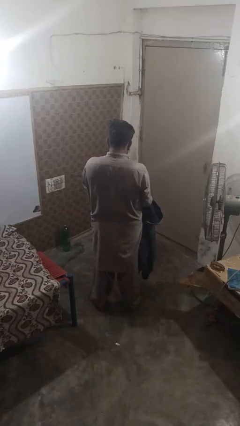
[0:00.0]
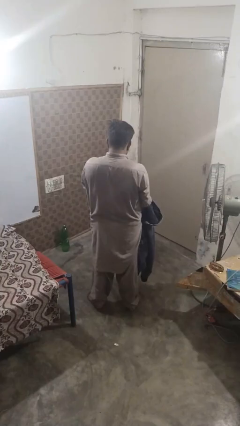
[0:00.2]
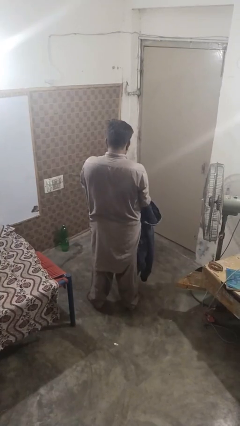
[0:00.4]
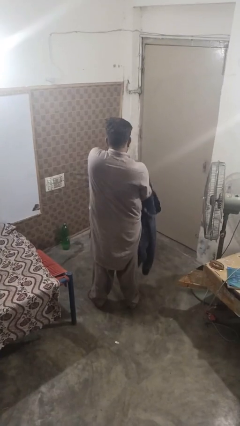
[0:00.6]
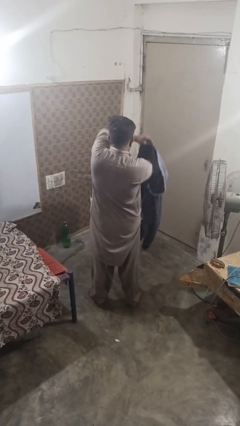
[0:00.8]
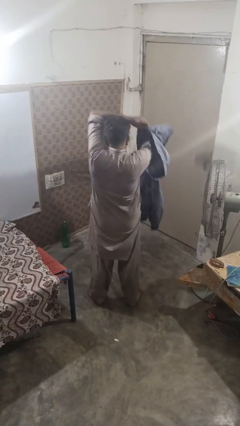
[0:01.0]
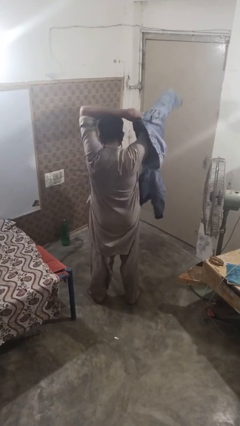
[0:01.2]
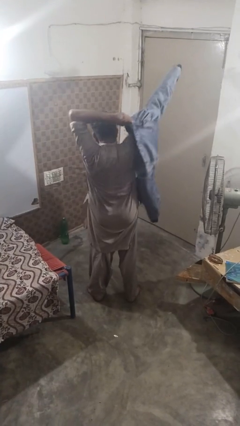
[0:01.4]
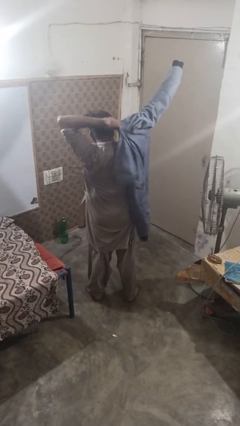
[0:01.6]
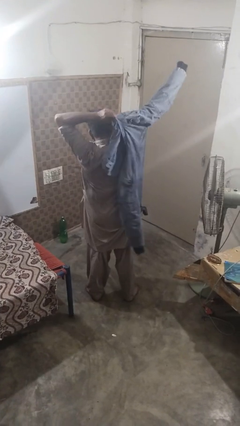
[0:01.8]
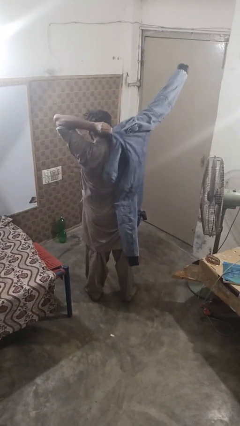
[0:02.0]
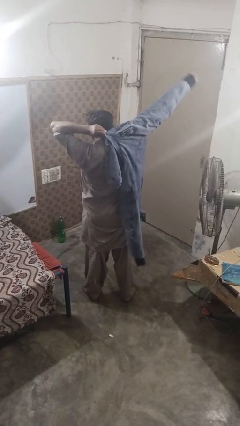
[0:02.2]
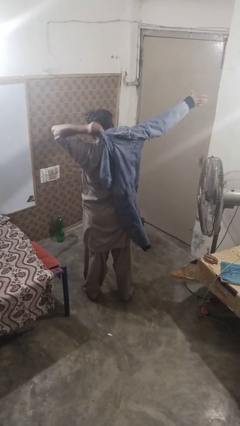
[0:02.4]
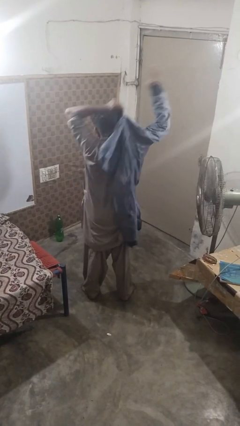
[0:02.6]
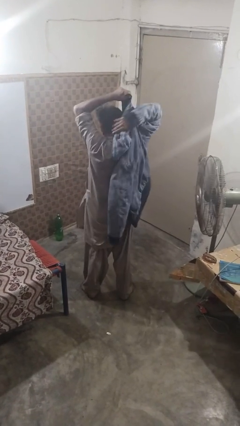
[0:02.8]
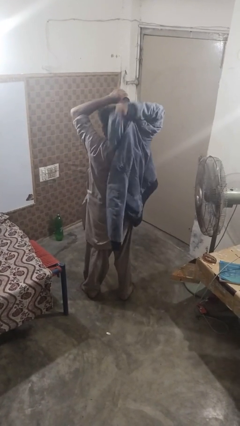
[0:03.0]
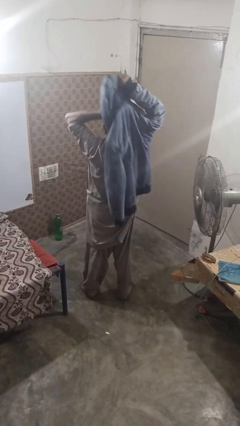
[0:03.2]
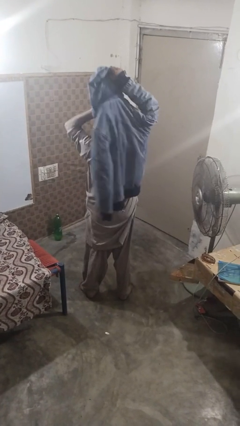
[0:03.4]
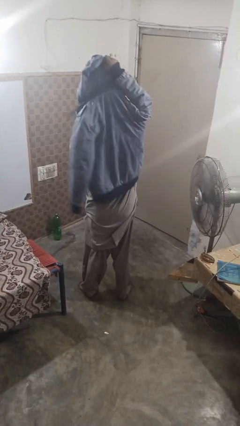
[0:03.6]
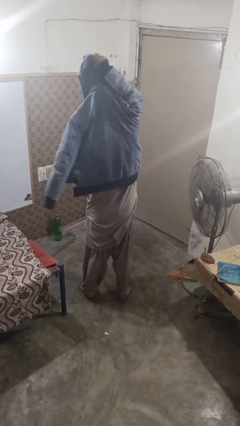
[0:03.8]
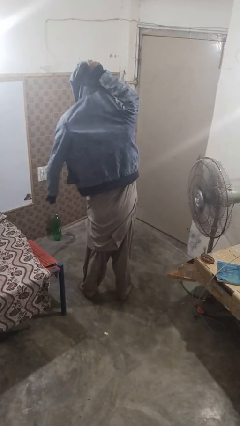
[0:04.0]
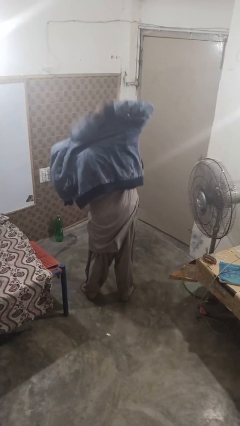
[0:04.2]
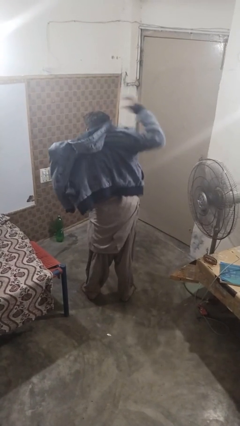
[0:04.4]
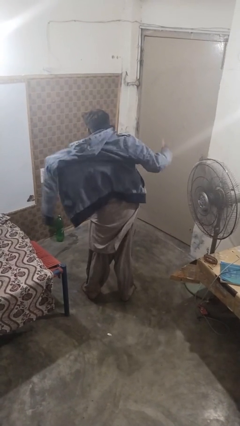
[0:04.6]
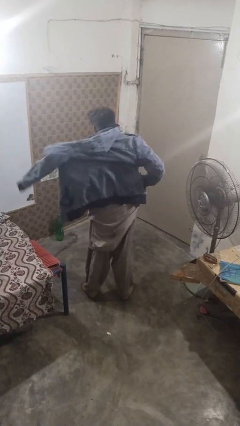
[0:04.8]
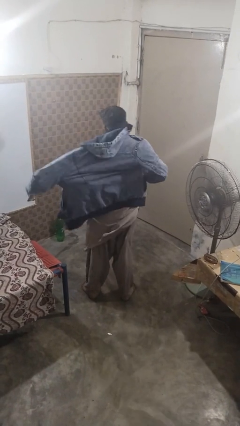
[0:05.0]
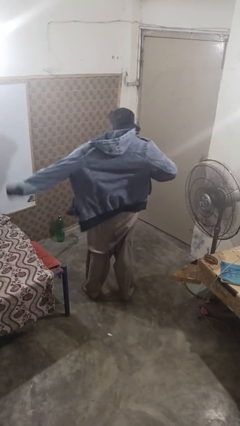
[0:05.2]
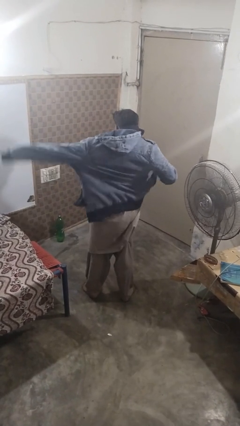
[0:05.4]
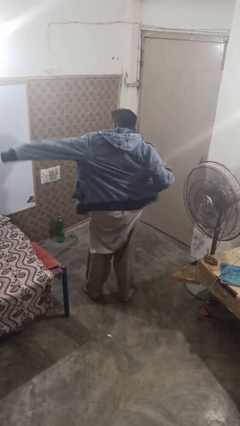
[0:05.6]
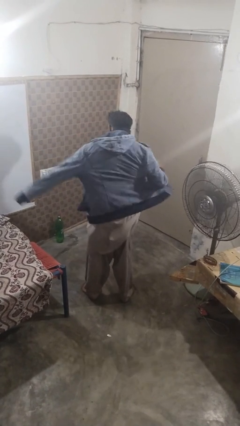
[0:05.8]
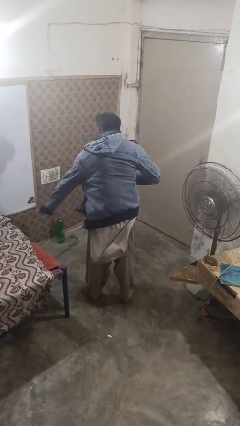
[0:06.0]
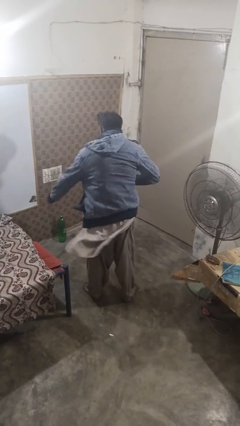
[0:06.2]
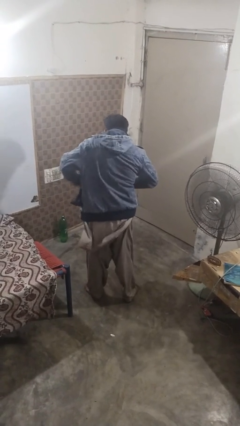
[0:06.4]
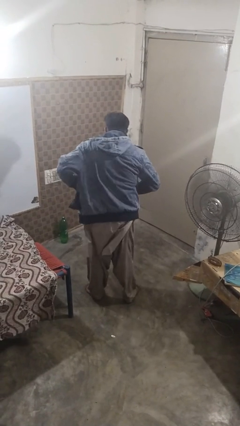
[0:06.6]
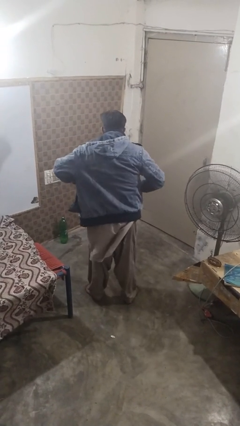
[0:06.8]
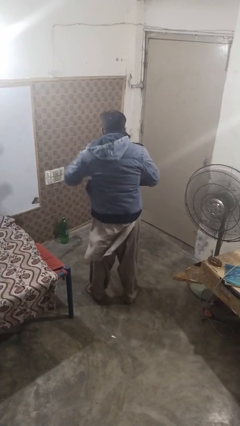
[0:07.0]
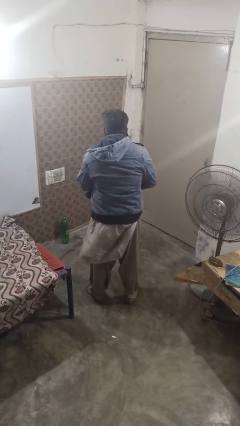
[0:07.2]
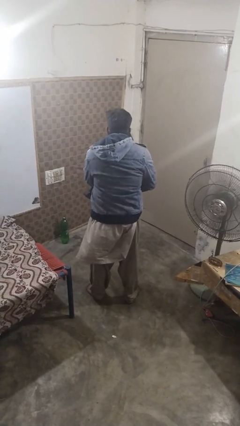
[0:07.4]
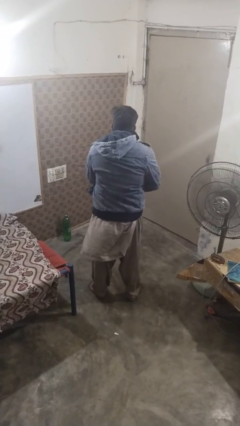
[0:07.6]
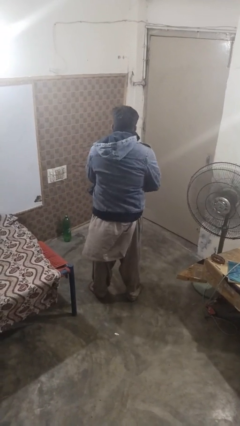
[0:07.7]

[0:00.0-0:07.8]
person puts on jacket

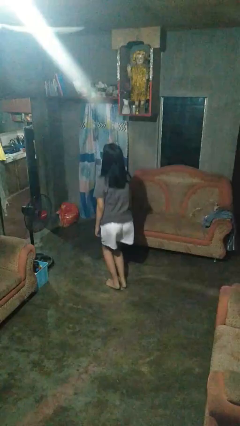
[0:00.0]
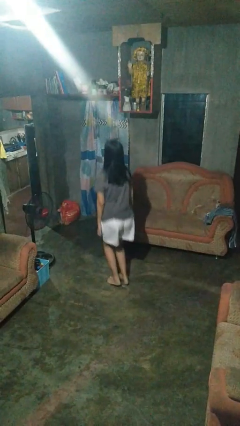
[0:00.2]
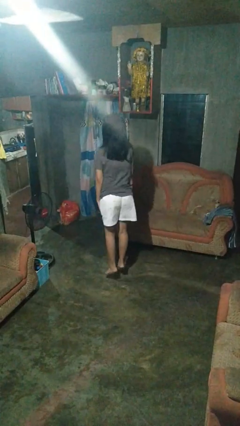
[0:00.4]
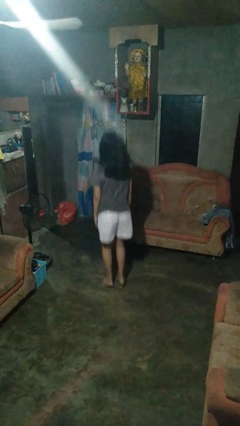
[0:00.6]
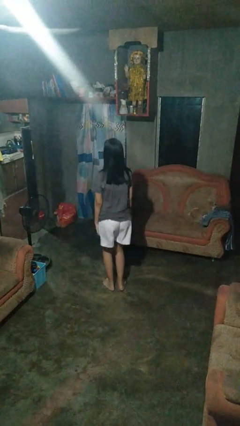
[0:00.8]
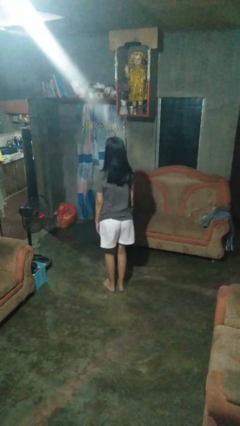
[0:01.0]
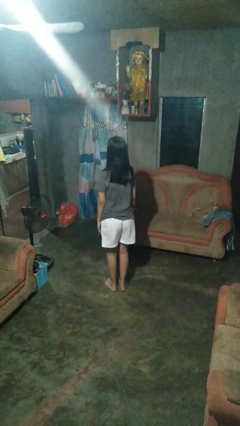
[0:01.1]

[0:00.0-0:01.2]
person jumps

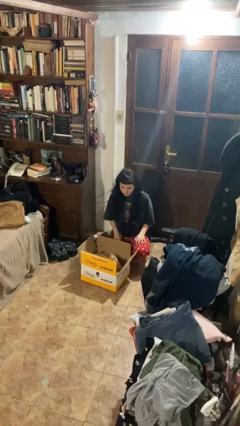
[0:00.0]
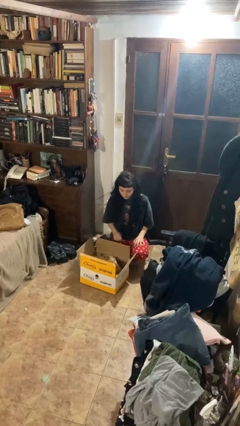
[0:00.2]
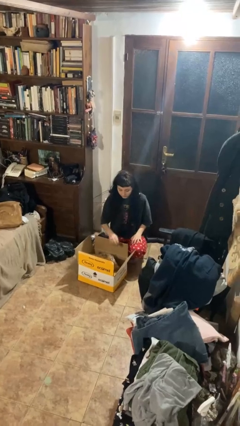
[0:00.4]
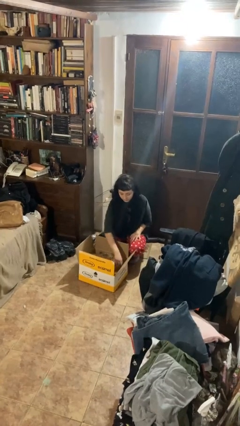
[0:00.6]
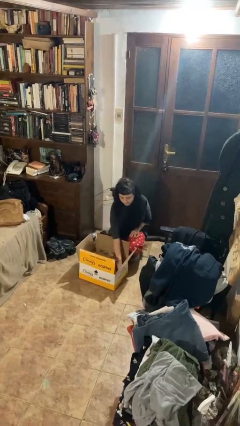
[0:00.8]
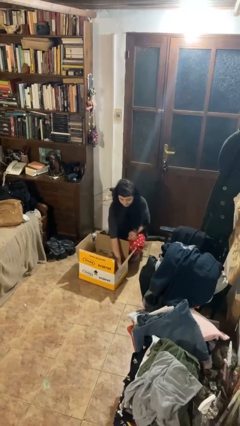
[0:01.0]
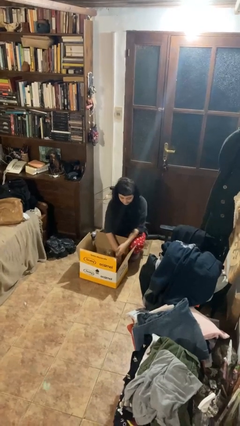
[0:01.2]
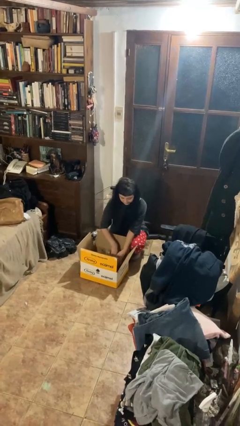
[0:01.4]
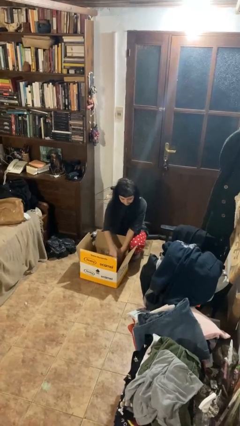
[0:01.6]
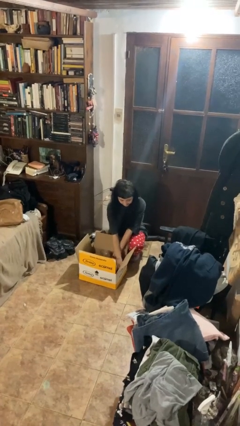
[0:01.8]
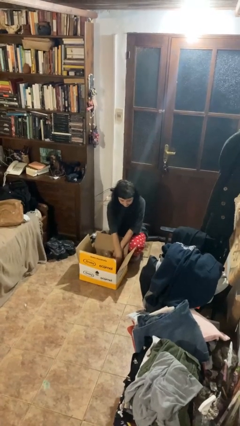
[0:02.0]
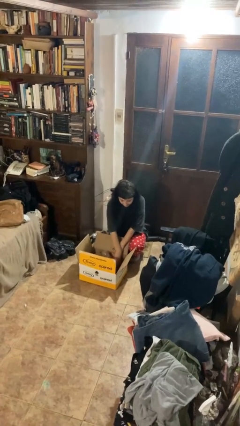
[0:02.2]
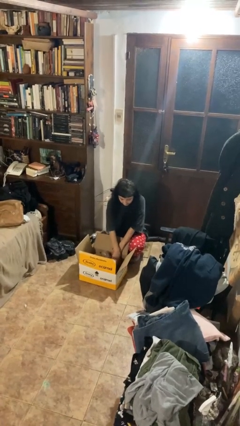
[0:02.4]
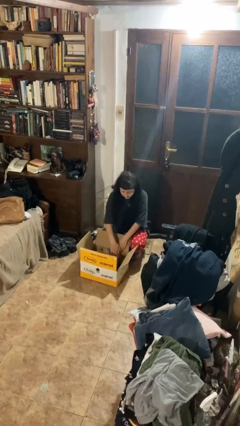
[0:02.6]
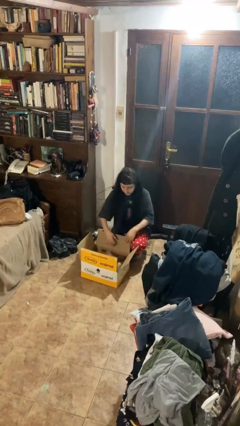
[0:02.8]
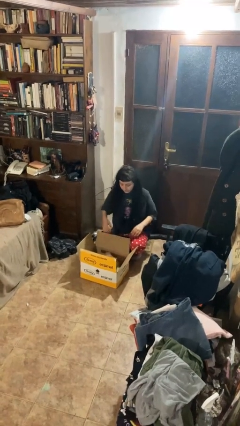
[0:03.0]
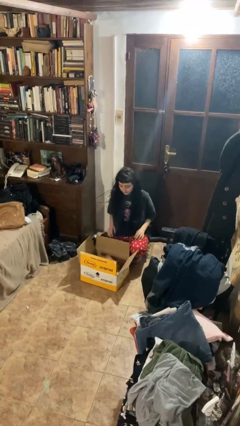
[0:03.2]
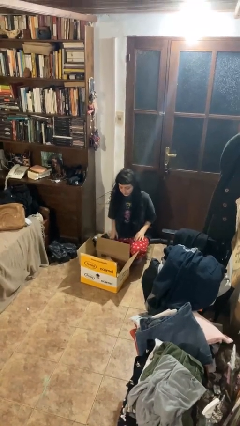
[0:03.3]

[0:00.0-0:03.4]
person searches in box

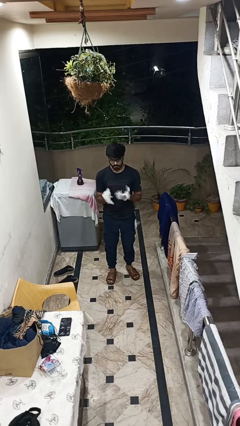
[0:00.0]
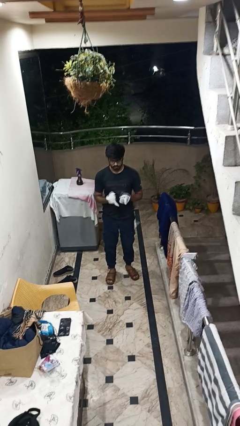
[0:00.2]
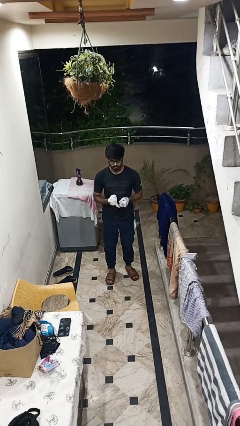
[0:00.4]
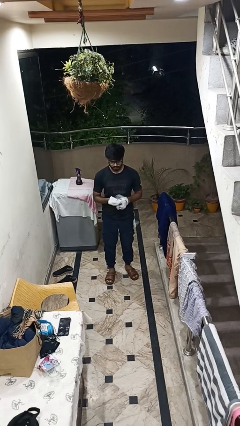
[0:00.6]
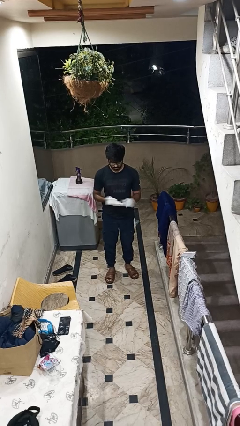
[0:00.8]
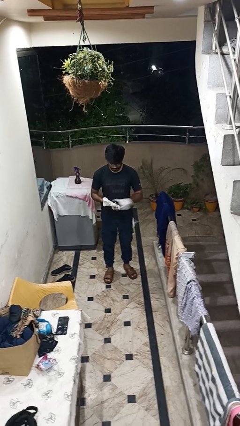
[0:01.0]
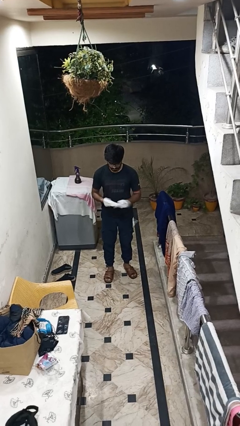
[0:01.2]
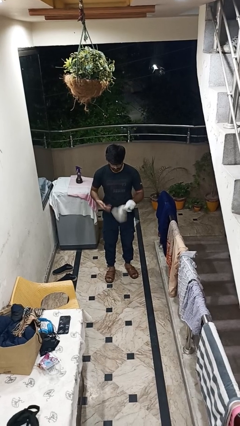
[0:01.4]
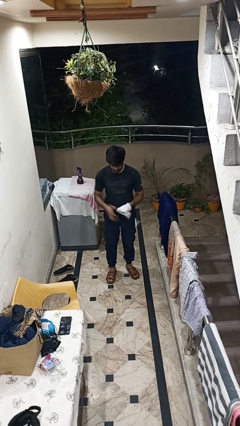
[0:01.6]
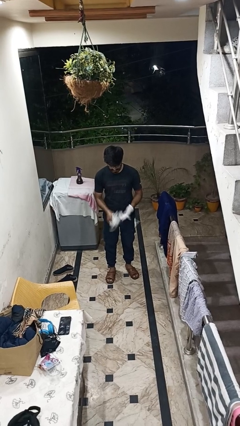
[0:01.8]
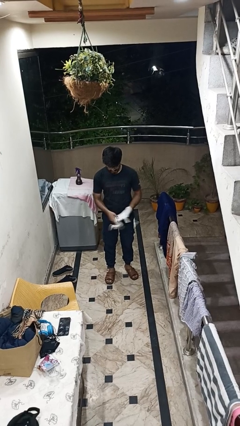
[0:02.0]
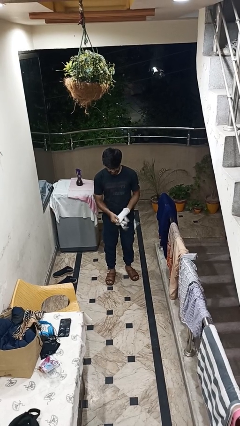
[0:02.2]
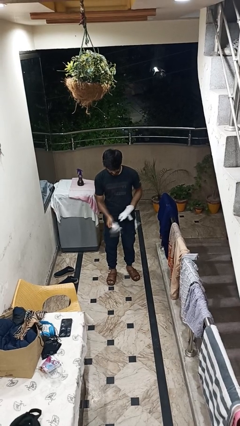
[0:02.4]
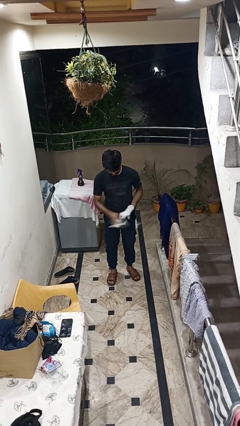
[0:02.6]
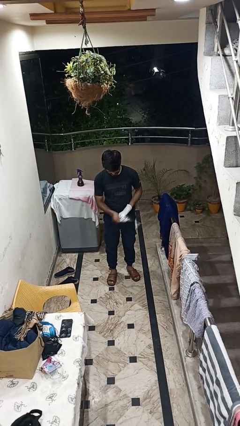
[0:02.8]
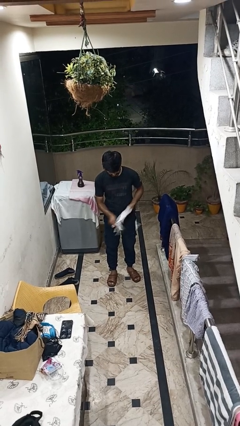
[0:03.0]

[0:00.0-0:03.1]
person takes off gloves

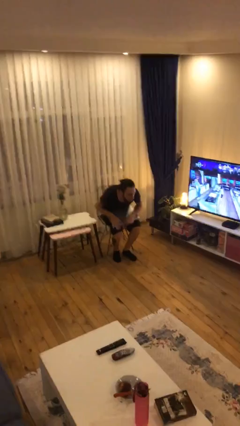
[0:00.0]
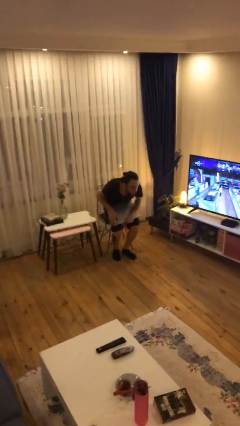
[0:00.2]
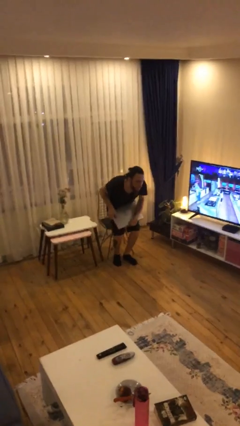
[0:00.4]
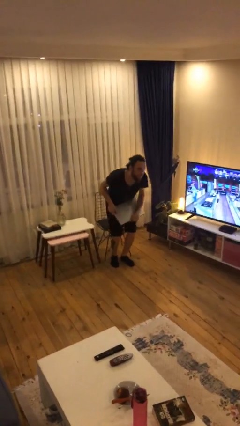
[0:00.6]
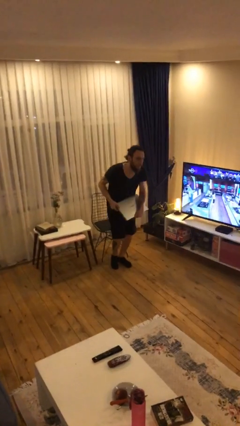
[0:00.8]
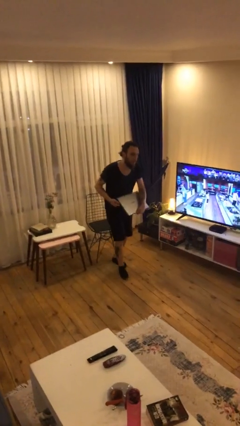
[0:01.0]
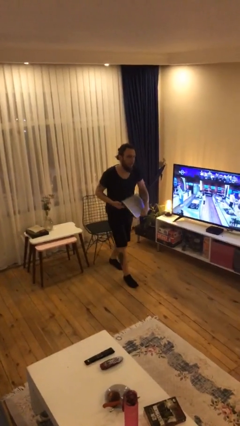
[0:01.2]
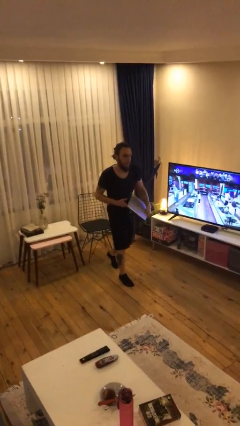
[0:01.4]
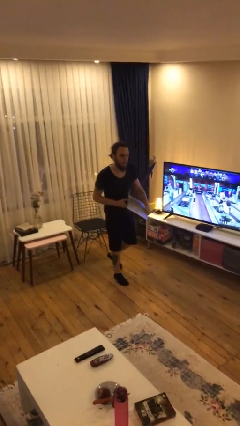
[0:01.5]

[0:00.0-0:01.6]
person stands up

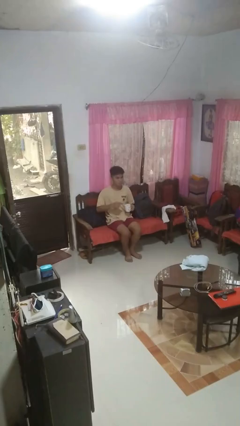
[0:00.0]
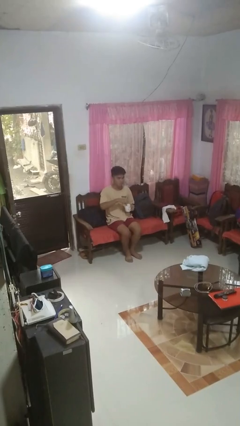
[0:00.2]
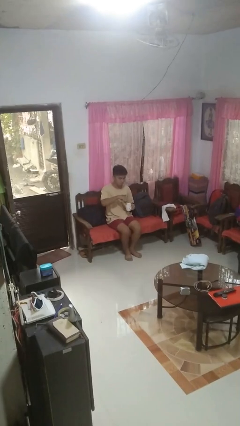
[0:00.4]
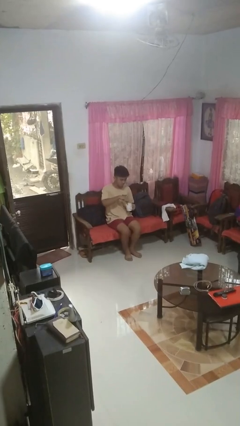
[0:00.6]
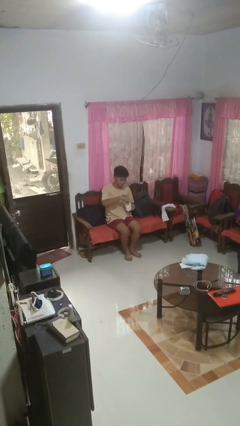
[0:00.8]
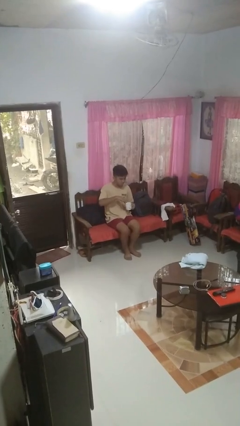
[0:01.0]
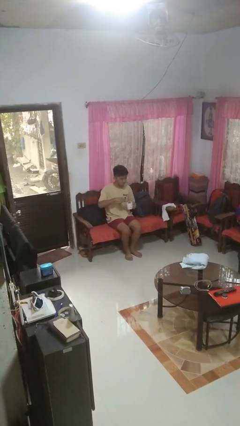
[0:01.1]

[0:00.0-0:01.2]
person stirs mug
